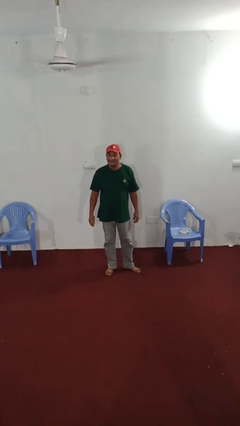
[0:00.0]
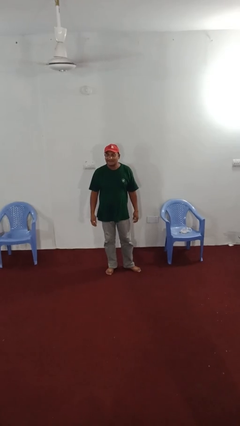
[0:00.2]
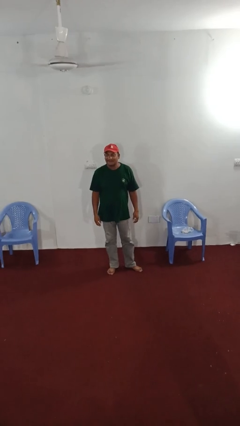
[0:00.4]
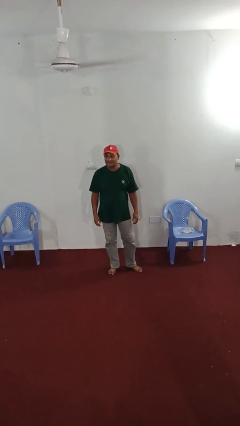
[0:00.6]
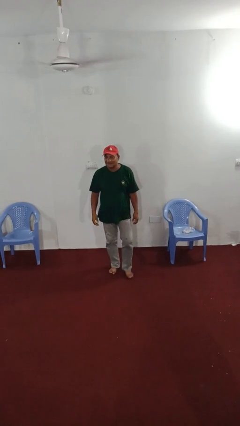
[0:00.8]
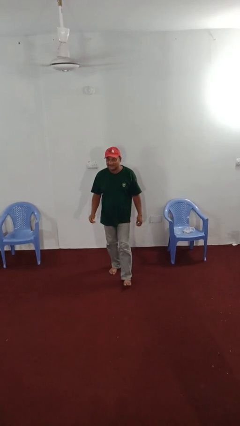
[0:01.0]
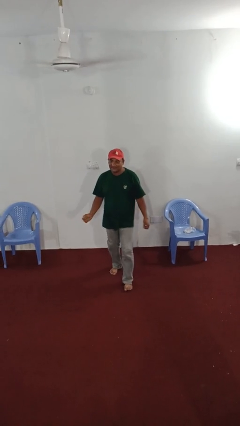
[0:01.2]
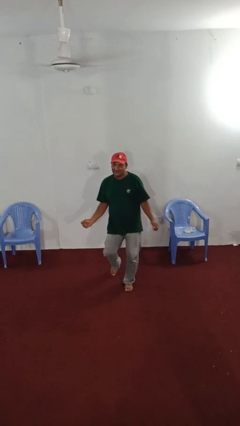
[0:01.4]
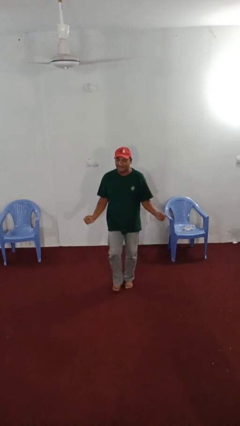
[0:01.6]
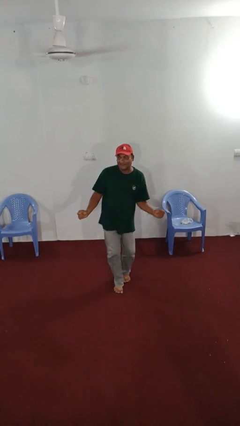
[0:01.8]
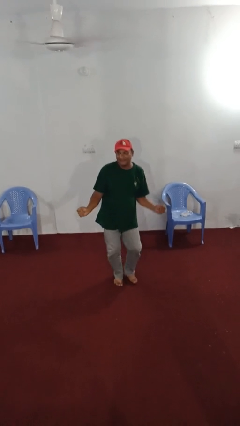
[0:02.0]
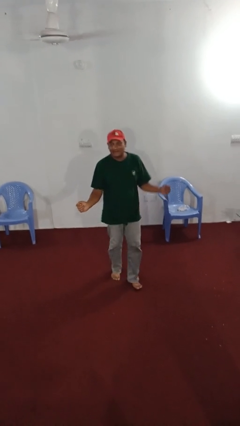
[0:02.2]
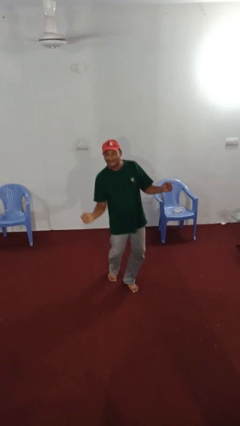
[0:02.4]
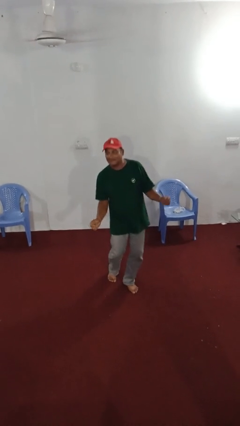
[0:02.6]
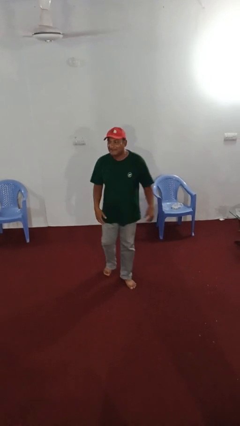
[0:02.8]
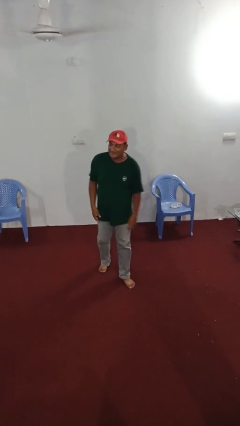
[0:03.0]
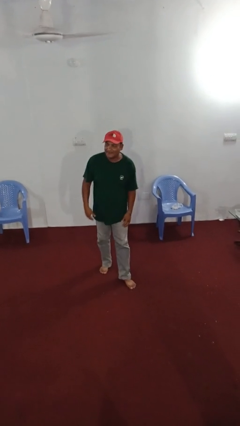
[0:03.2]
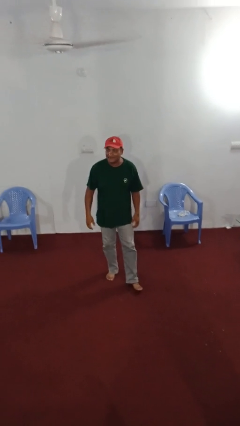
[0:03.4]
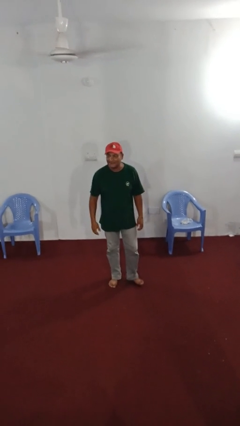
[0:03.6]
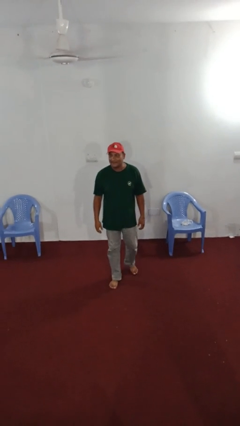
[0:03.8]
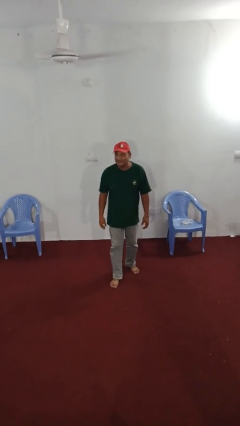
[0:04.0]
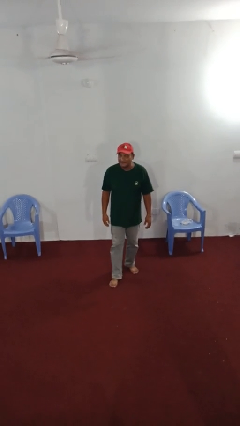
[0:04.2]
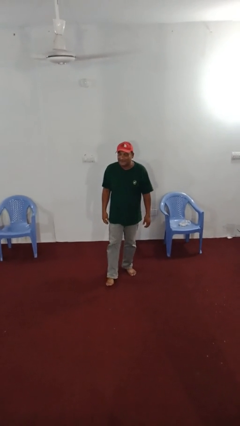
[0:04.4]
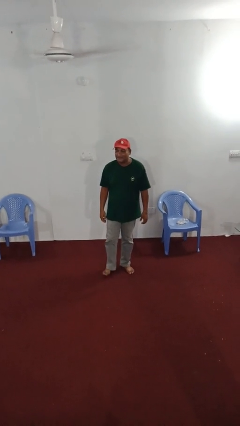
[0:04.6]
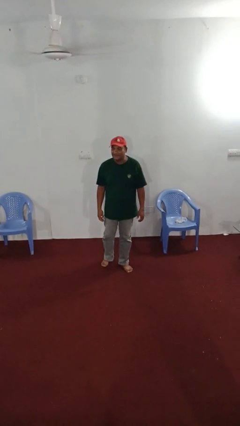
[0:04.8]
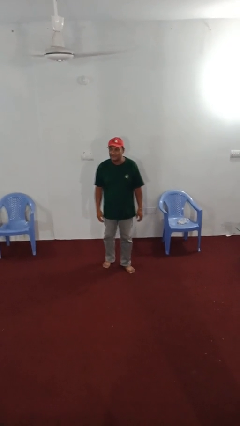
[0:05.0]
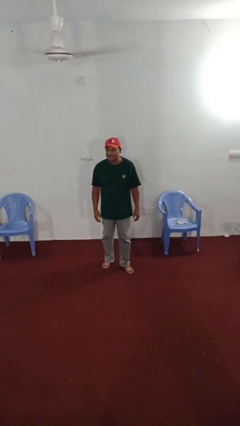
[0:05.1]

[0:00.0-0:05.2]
person dances in place

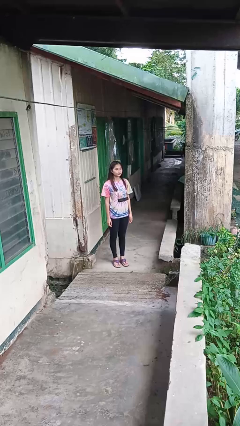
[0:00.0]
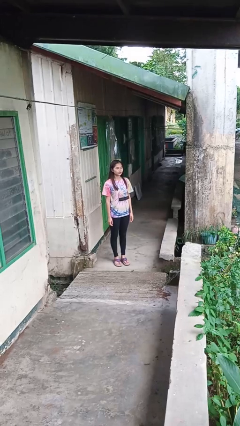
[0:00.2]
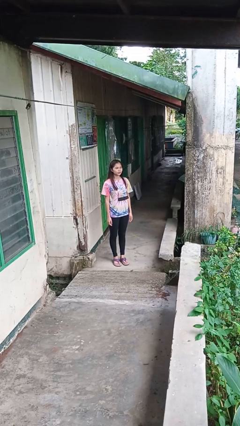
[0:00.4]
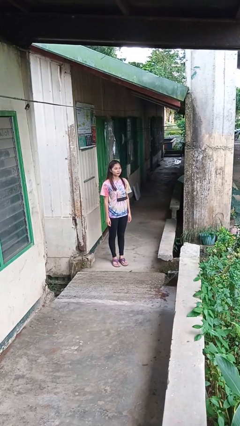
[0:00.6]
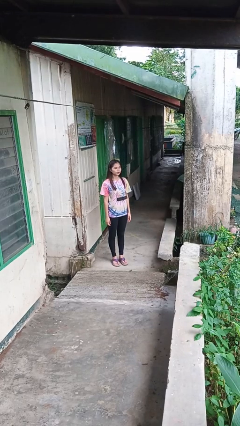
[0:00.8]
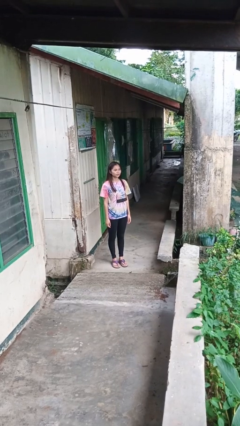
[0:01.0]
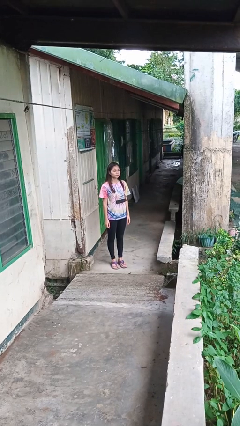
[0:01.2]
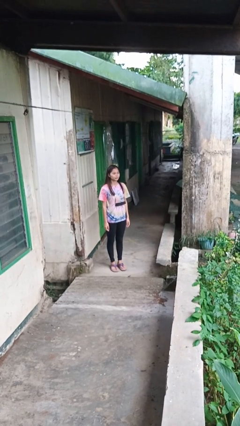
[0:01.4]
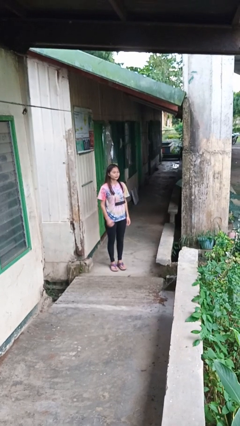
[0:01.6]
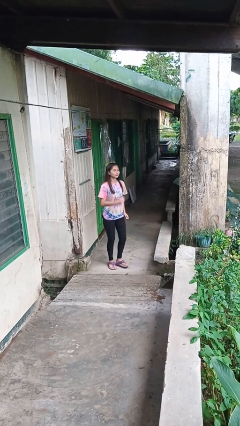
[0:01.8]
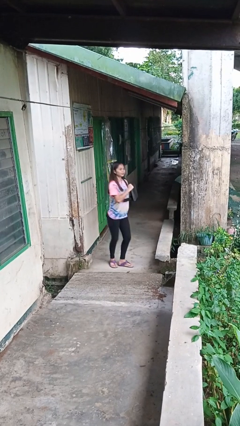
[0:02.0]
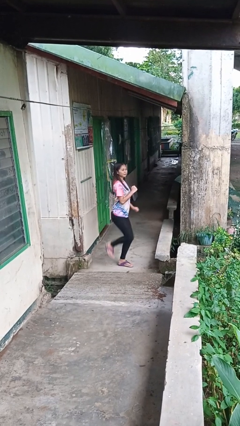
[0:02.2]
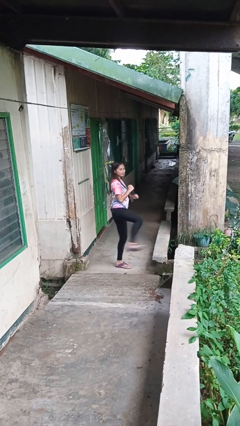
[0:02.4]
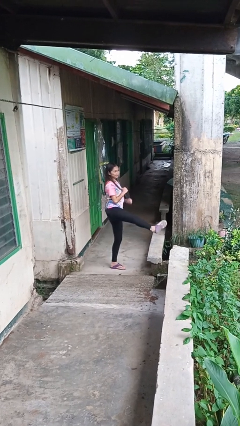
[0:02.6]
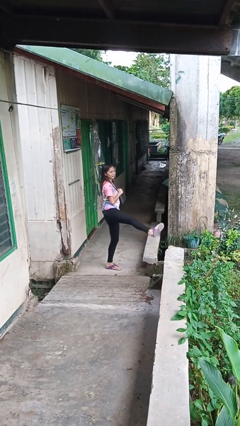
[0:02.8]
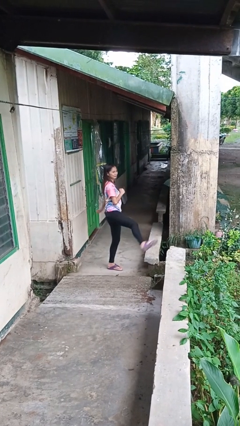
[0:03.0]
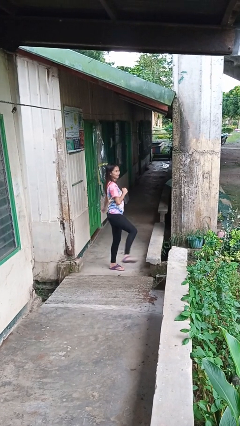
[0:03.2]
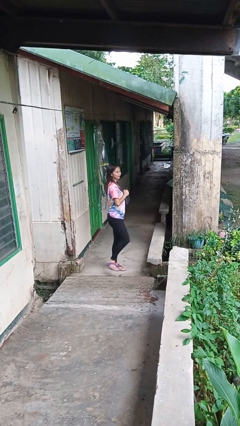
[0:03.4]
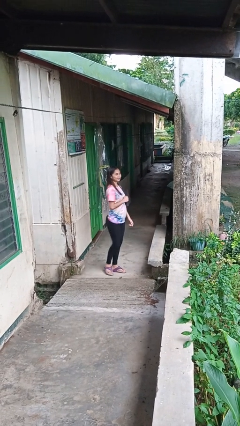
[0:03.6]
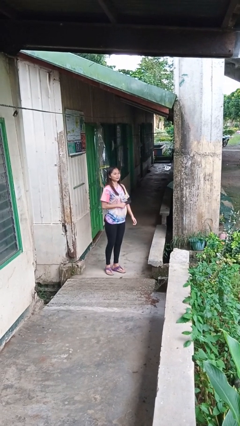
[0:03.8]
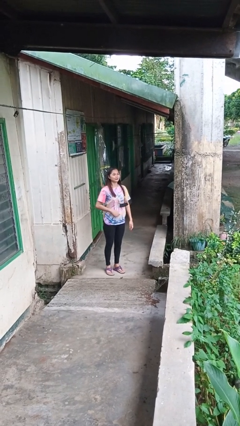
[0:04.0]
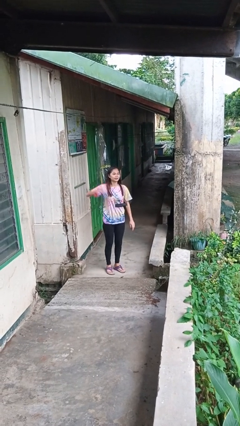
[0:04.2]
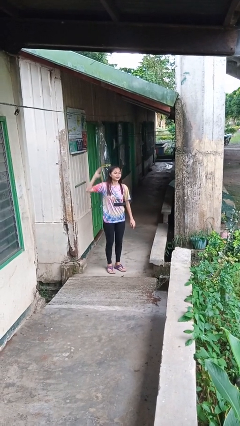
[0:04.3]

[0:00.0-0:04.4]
person karate kicks

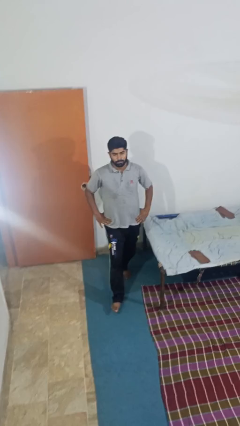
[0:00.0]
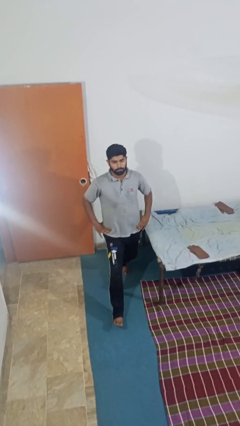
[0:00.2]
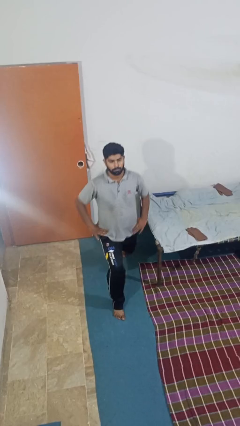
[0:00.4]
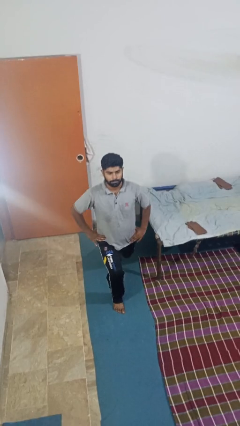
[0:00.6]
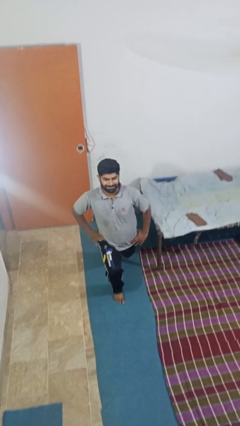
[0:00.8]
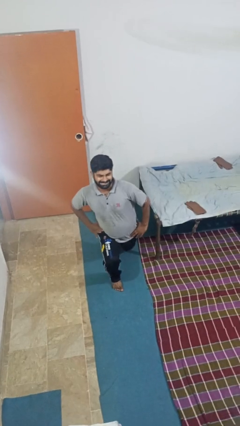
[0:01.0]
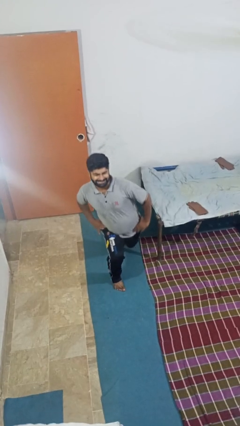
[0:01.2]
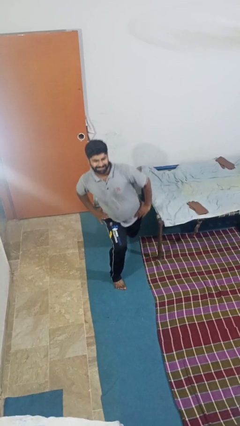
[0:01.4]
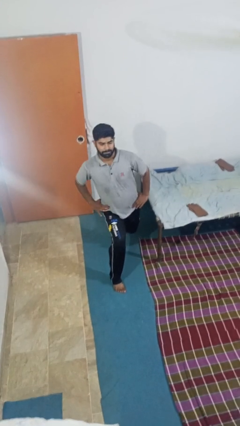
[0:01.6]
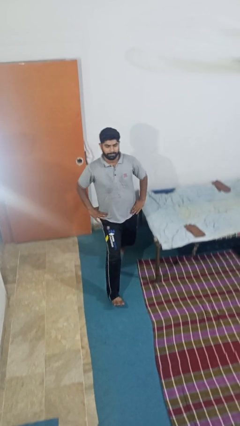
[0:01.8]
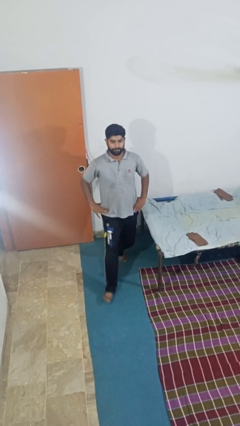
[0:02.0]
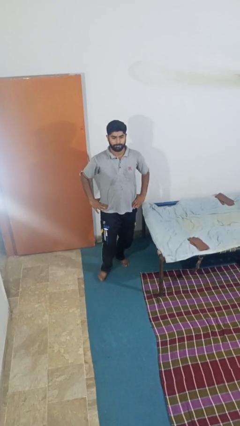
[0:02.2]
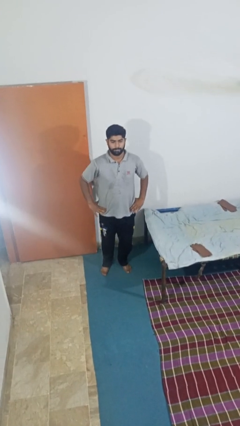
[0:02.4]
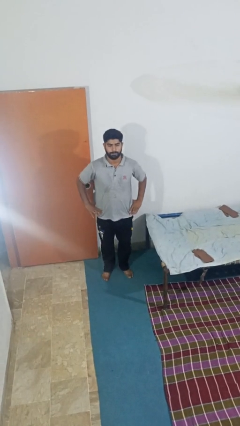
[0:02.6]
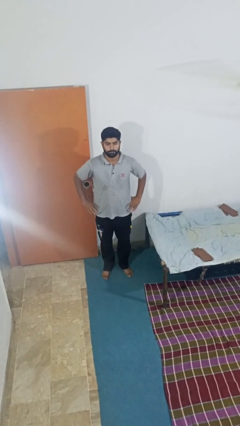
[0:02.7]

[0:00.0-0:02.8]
person exercises with lunges

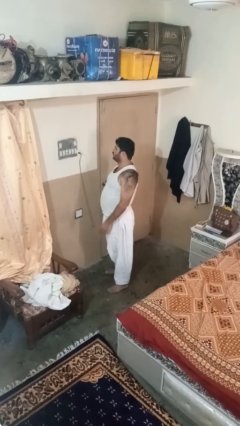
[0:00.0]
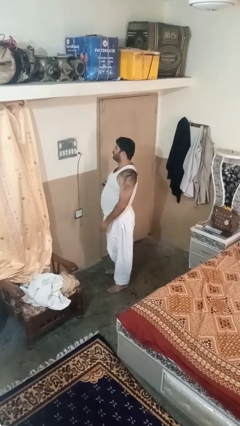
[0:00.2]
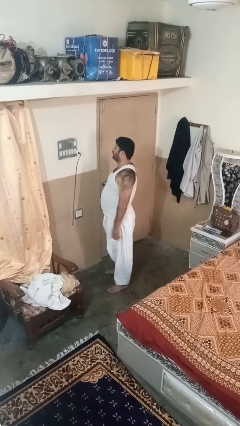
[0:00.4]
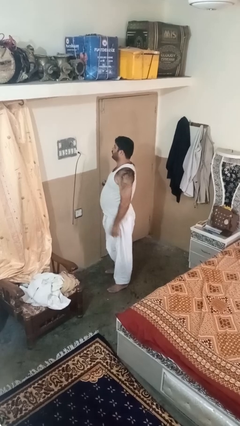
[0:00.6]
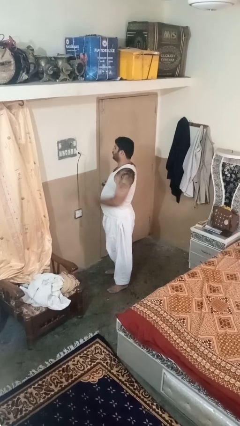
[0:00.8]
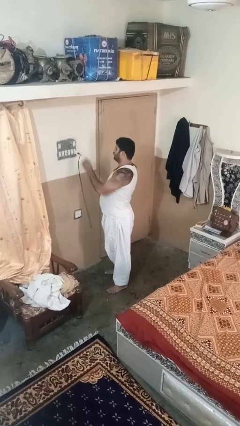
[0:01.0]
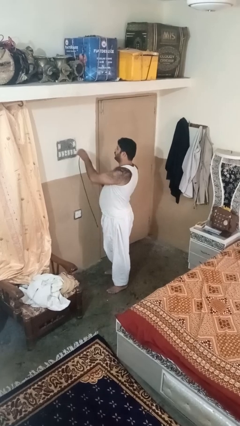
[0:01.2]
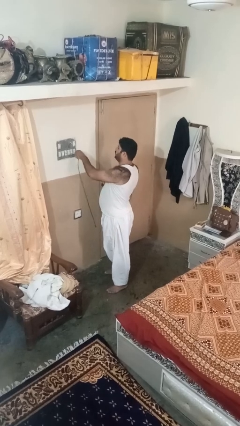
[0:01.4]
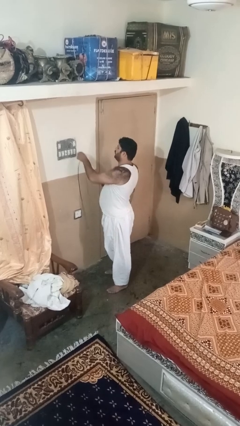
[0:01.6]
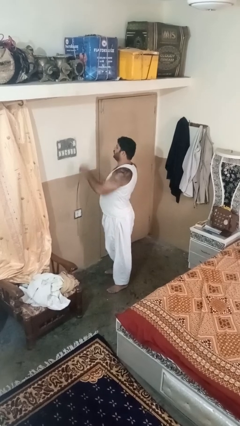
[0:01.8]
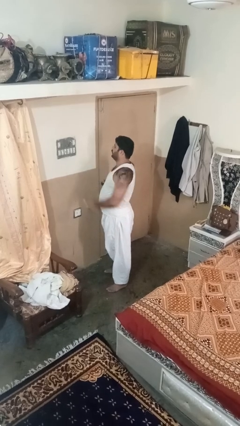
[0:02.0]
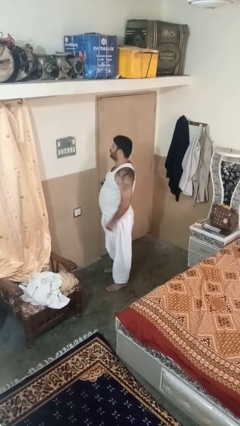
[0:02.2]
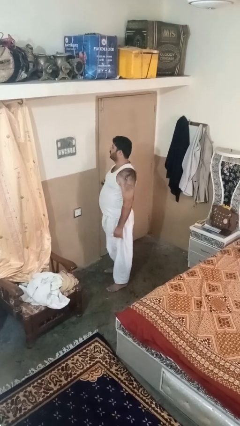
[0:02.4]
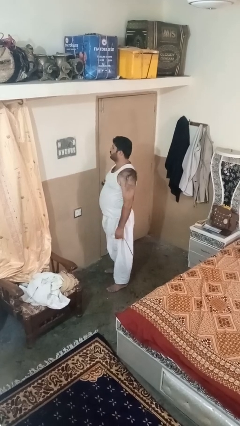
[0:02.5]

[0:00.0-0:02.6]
person unplugs from electrical socket

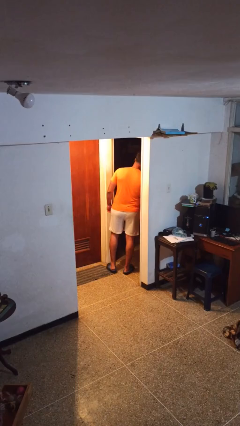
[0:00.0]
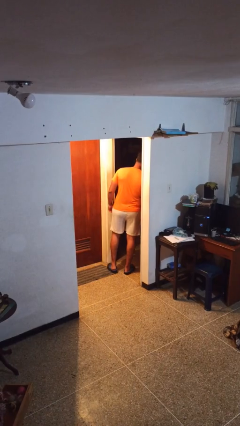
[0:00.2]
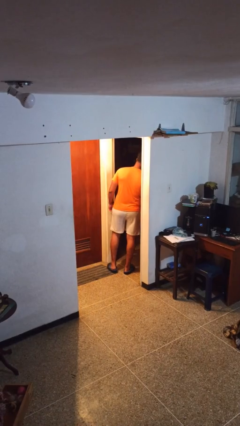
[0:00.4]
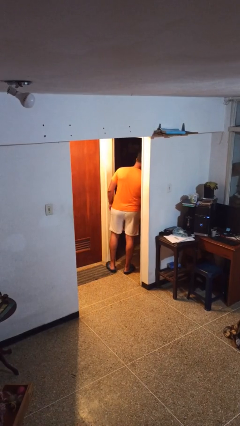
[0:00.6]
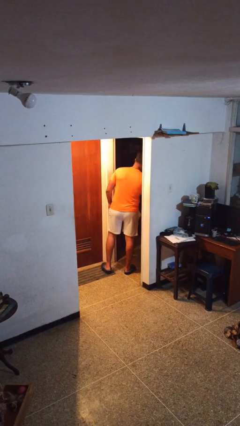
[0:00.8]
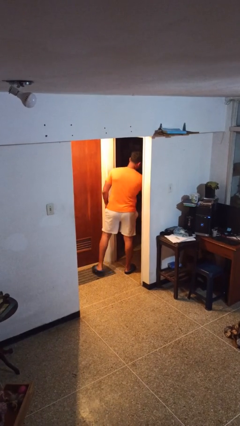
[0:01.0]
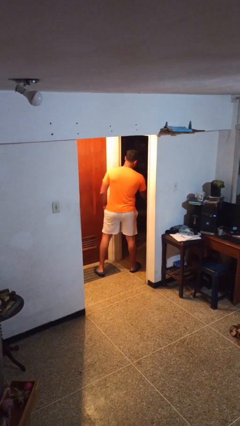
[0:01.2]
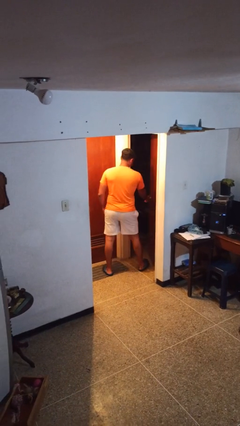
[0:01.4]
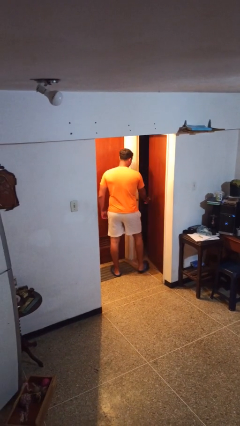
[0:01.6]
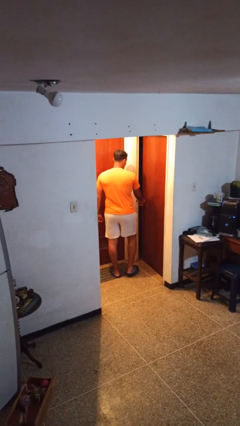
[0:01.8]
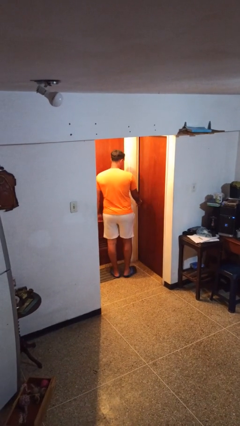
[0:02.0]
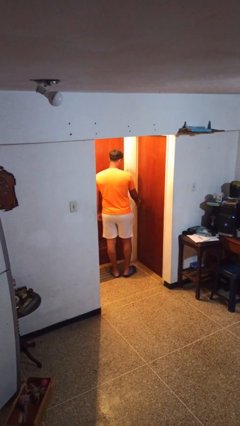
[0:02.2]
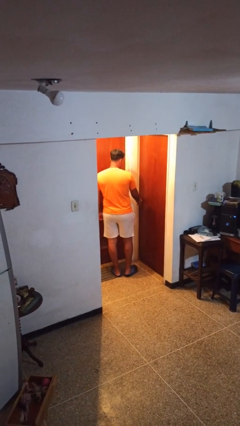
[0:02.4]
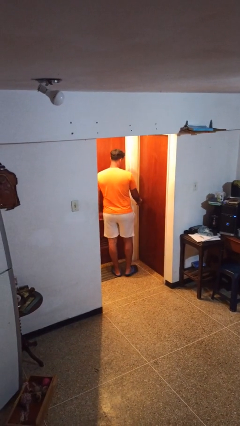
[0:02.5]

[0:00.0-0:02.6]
person closes facility door
